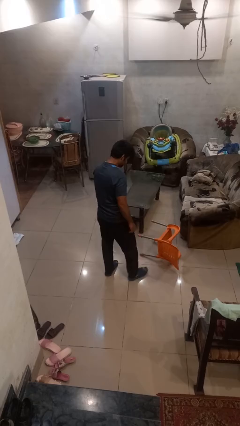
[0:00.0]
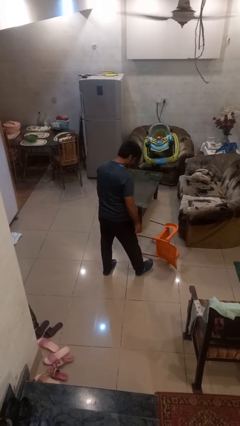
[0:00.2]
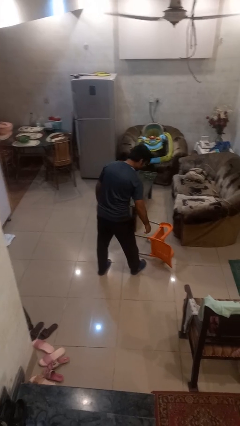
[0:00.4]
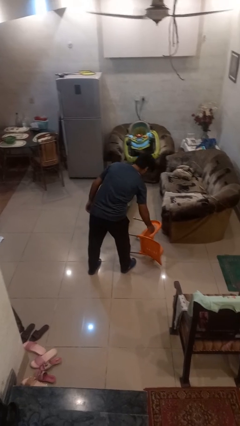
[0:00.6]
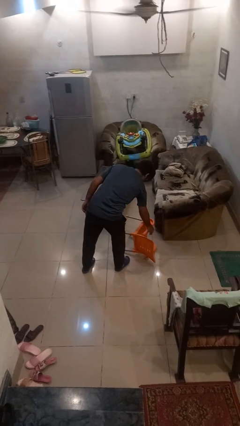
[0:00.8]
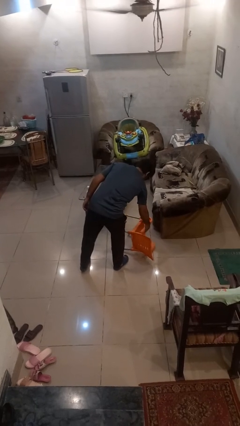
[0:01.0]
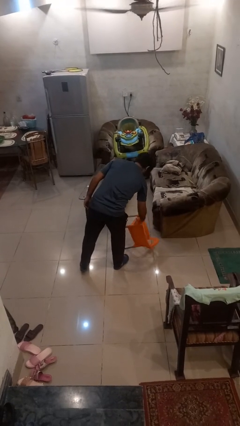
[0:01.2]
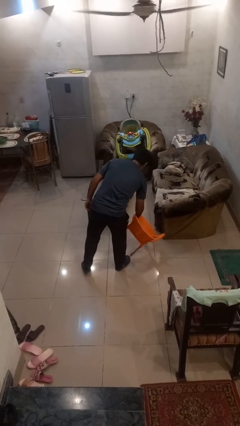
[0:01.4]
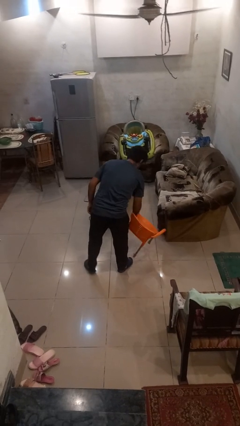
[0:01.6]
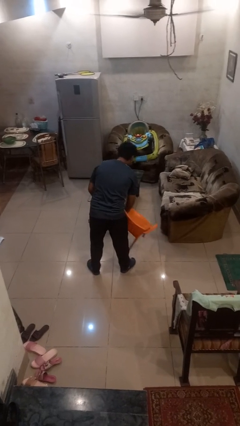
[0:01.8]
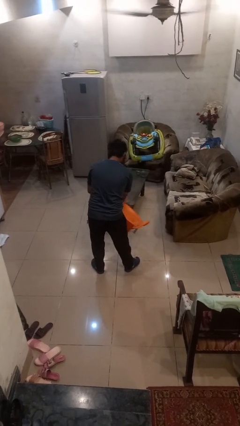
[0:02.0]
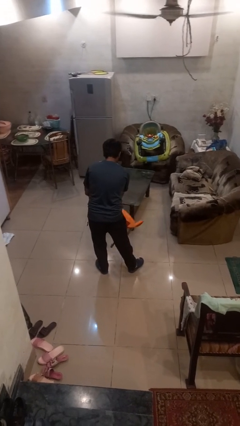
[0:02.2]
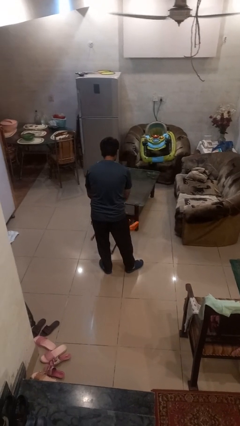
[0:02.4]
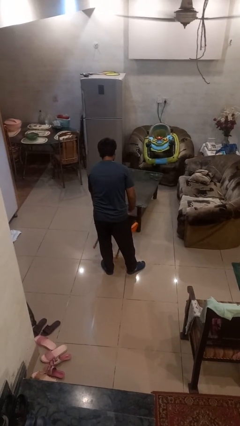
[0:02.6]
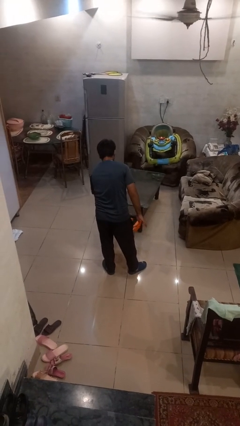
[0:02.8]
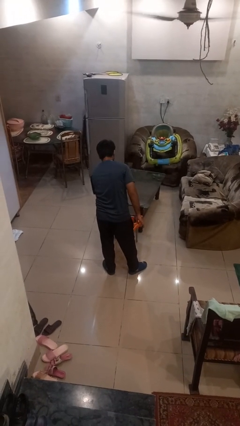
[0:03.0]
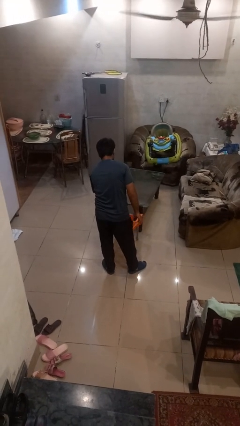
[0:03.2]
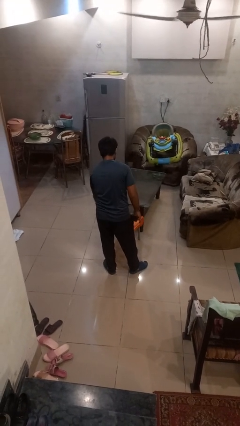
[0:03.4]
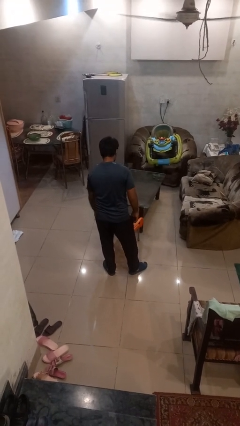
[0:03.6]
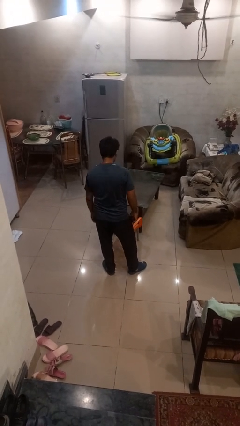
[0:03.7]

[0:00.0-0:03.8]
person sets upright furniture

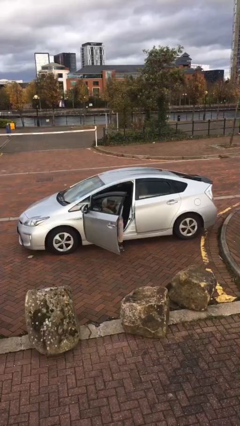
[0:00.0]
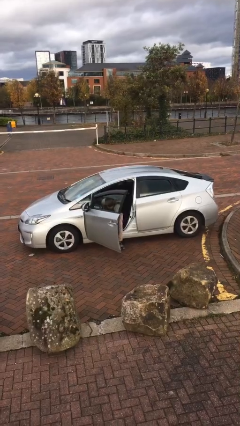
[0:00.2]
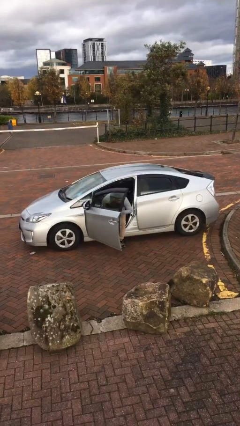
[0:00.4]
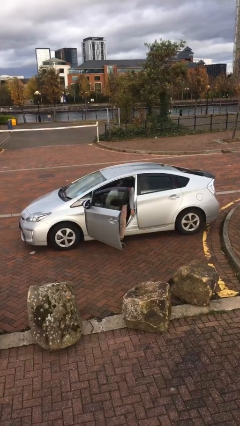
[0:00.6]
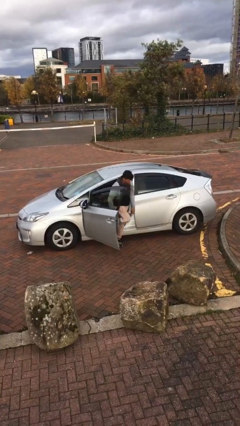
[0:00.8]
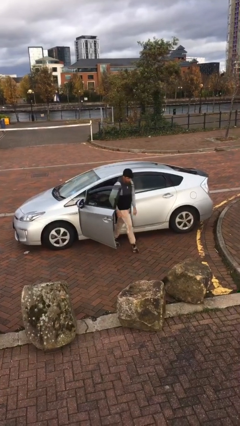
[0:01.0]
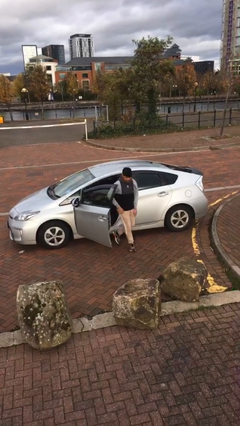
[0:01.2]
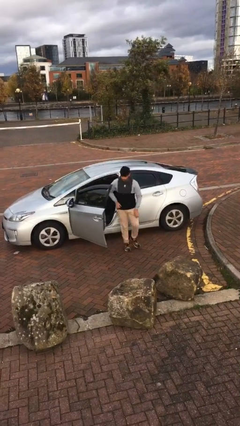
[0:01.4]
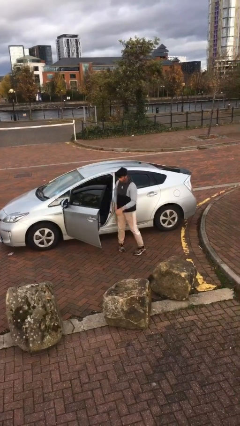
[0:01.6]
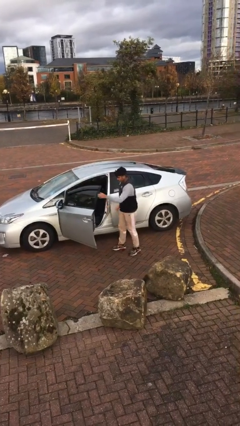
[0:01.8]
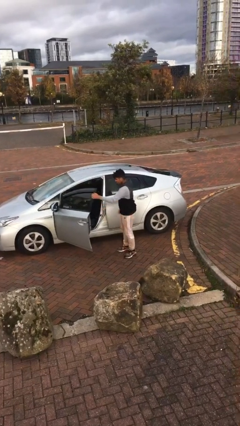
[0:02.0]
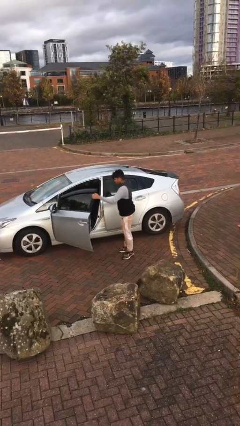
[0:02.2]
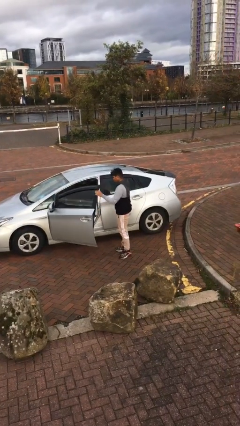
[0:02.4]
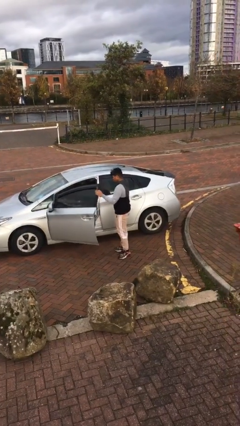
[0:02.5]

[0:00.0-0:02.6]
person exits car

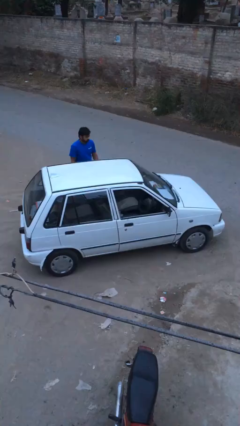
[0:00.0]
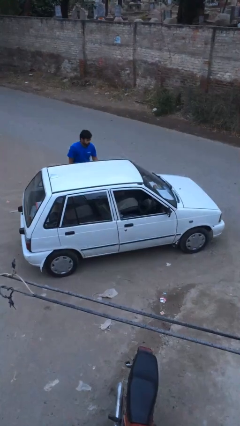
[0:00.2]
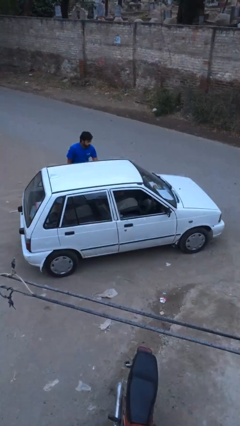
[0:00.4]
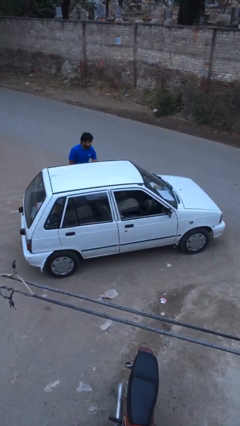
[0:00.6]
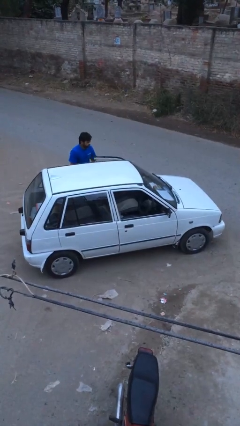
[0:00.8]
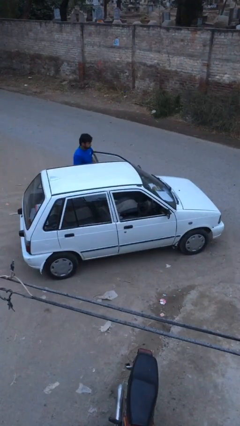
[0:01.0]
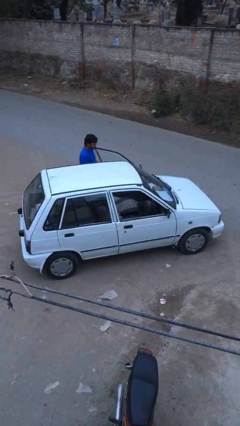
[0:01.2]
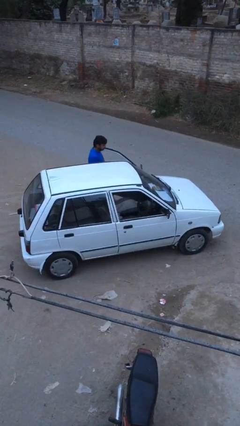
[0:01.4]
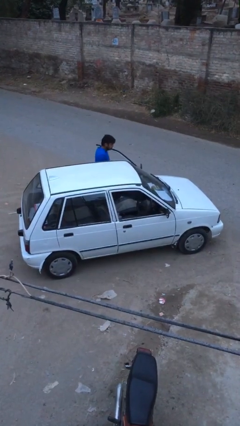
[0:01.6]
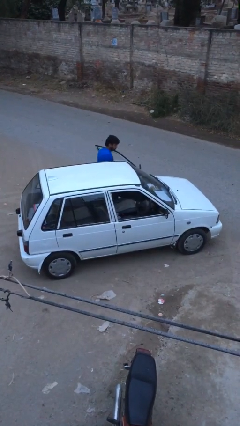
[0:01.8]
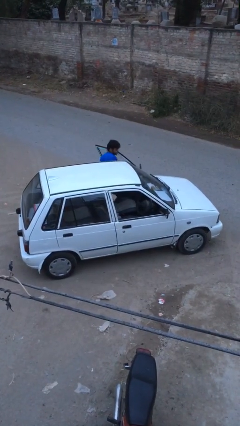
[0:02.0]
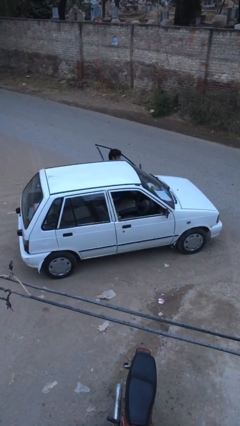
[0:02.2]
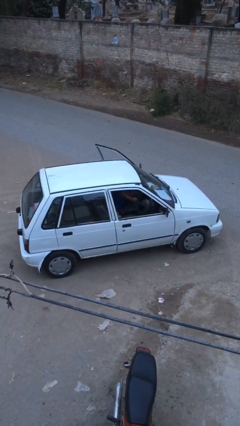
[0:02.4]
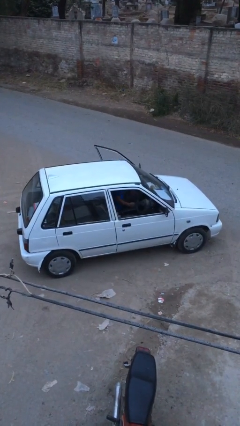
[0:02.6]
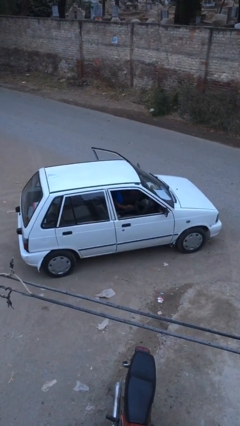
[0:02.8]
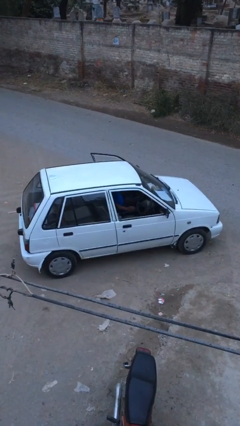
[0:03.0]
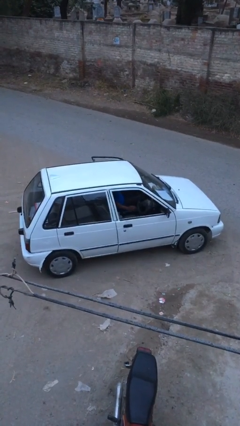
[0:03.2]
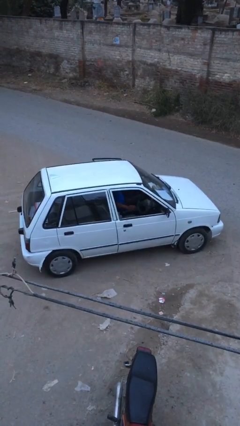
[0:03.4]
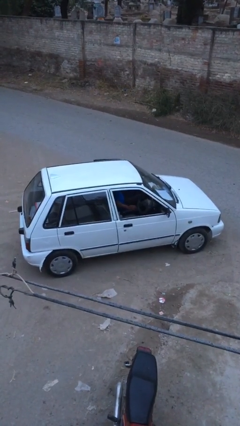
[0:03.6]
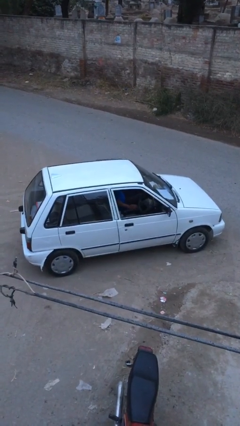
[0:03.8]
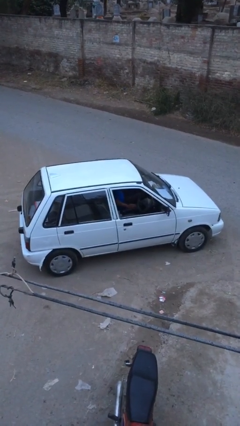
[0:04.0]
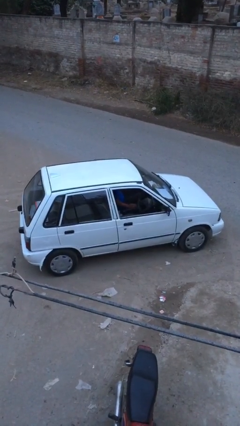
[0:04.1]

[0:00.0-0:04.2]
car picks up person

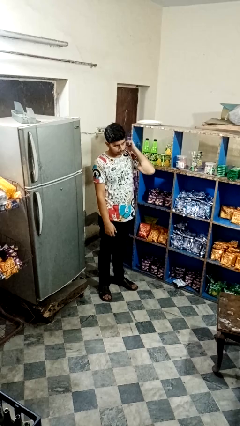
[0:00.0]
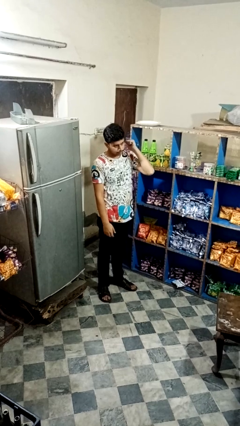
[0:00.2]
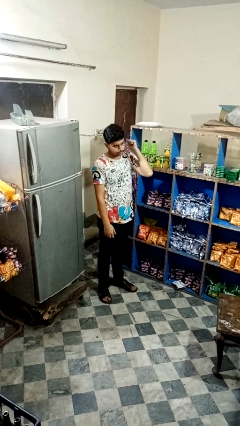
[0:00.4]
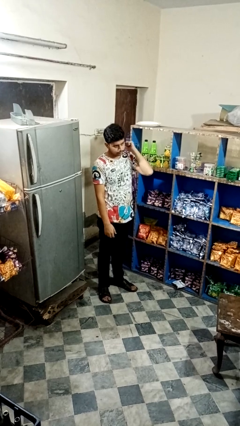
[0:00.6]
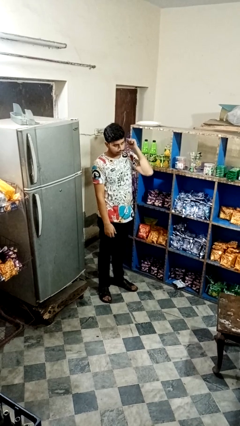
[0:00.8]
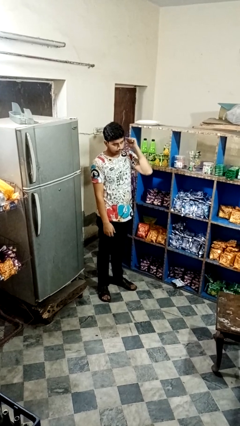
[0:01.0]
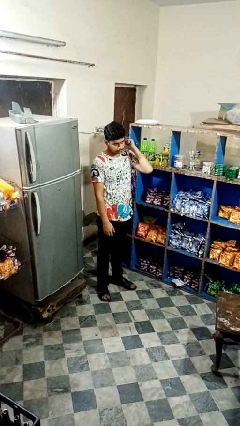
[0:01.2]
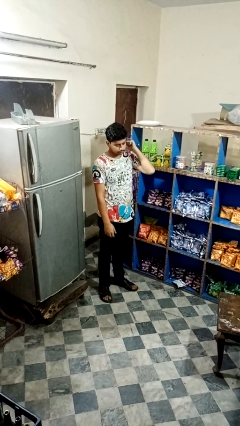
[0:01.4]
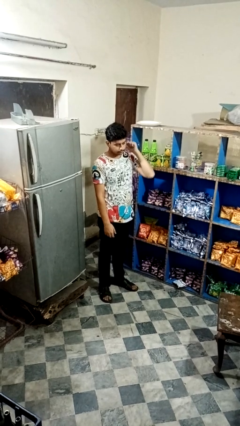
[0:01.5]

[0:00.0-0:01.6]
person gestures behind me

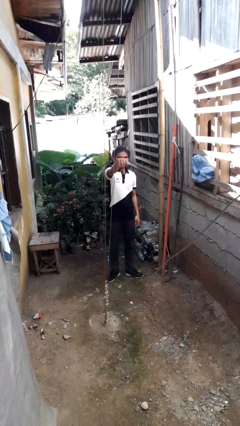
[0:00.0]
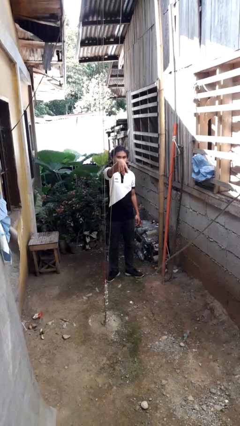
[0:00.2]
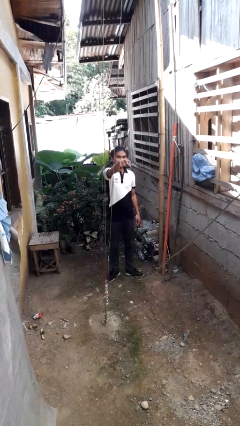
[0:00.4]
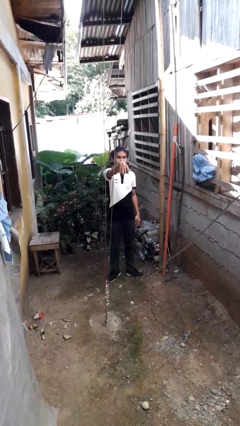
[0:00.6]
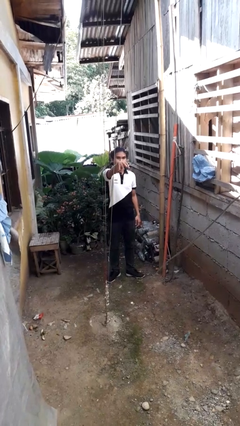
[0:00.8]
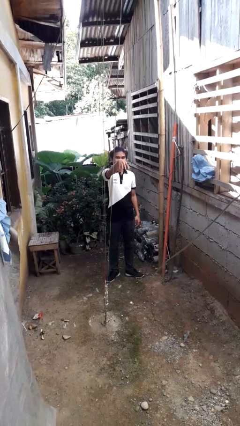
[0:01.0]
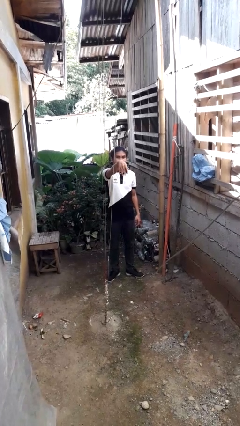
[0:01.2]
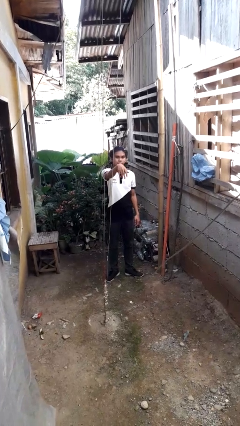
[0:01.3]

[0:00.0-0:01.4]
person gestures come here

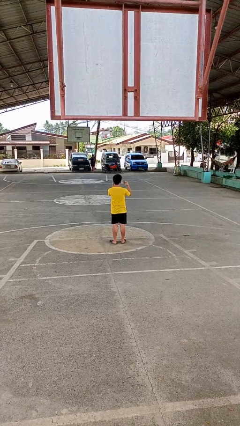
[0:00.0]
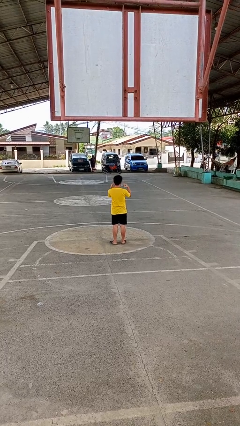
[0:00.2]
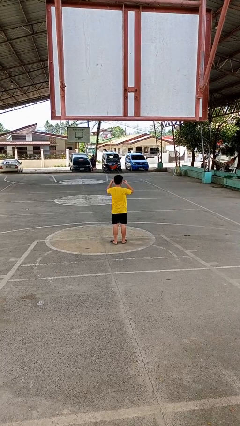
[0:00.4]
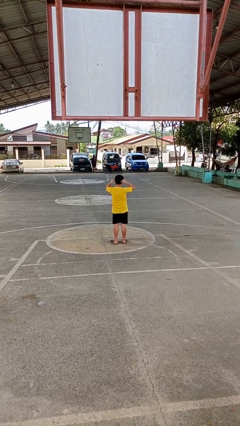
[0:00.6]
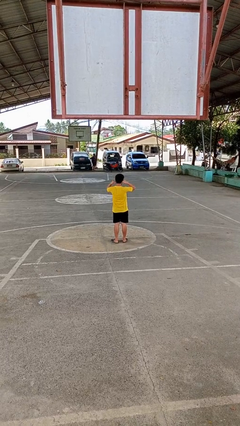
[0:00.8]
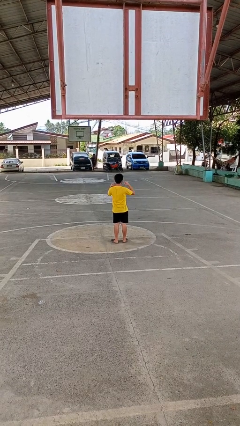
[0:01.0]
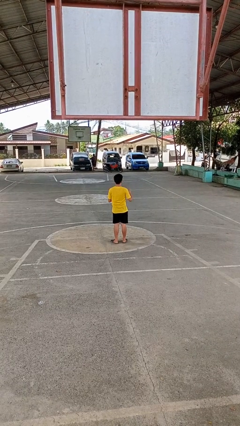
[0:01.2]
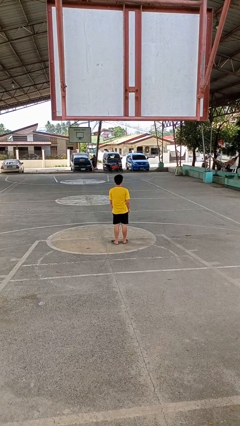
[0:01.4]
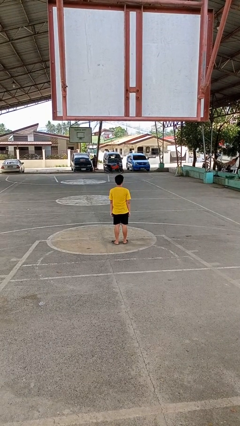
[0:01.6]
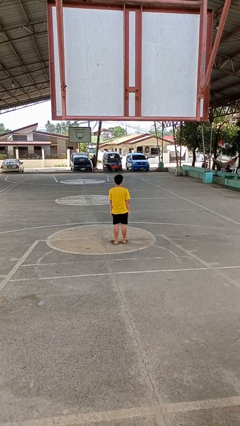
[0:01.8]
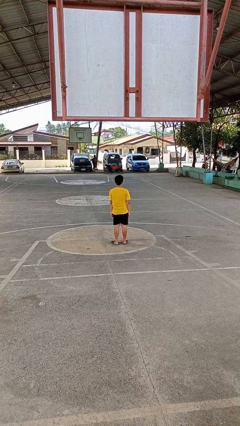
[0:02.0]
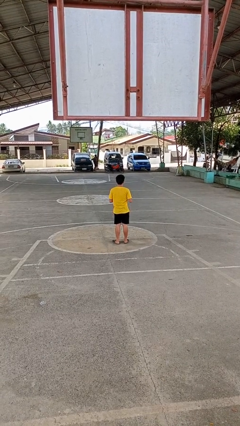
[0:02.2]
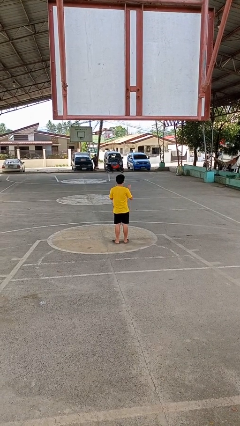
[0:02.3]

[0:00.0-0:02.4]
person puts on facemask

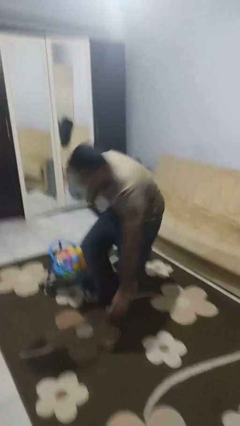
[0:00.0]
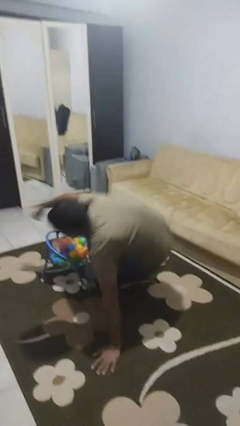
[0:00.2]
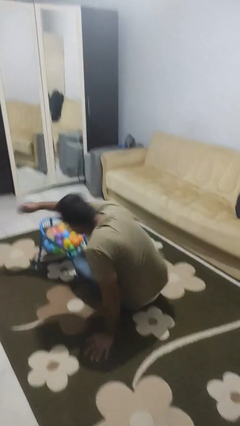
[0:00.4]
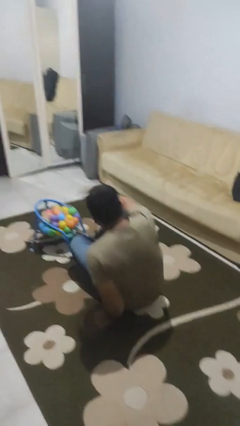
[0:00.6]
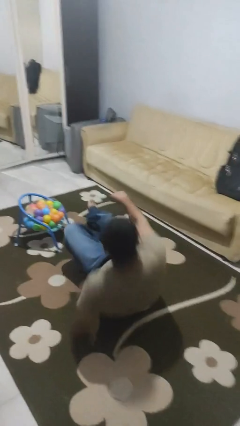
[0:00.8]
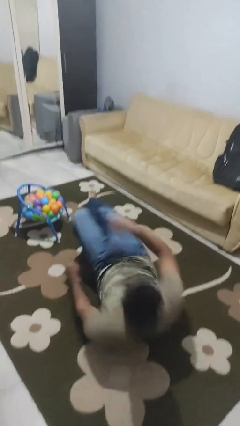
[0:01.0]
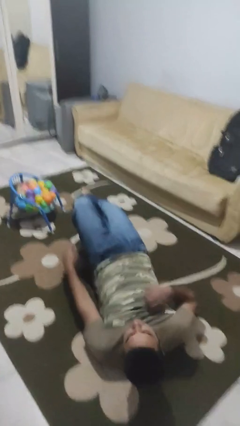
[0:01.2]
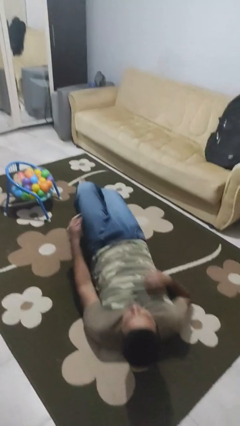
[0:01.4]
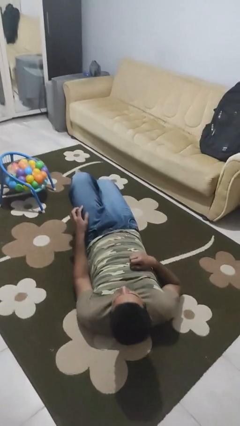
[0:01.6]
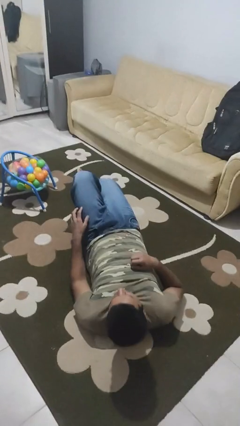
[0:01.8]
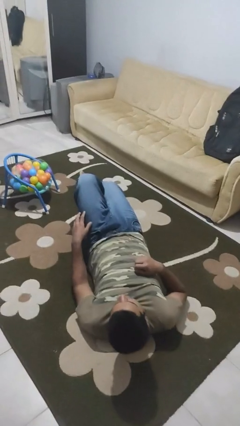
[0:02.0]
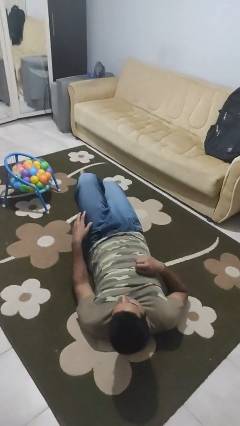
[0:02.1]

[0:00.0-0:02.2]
person lies down on floor
